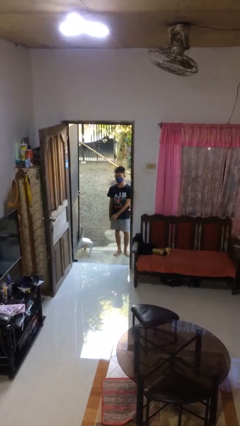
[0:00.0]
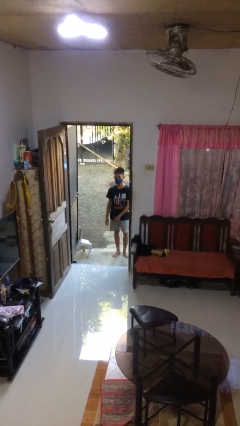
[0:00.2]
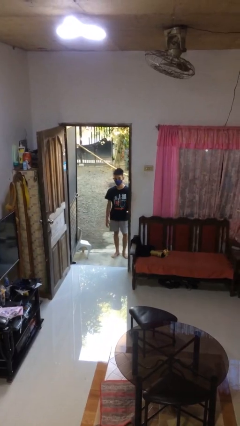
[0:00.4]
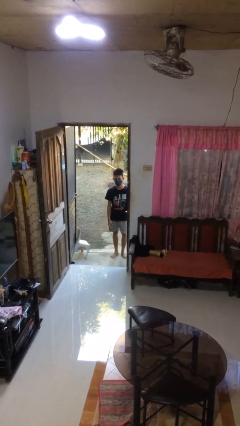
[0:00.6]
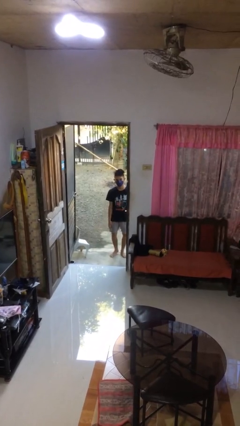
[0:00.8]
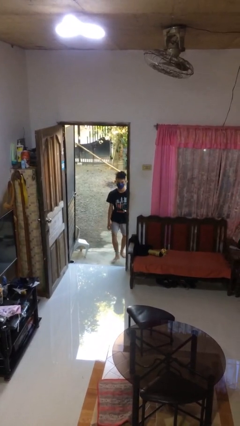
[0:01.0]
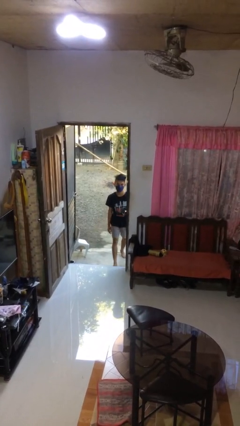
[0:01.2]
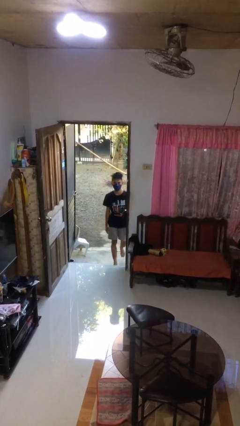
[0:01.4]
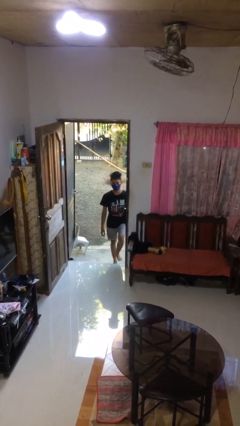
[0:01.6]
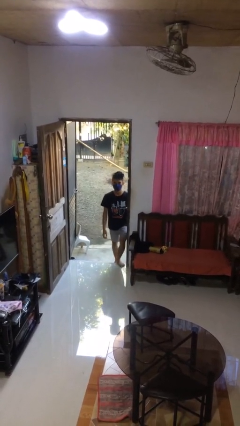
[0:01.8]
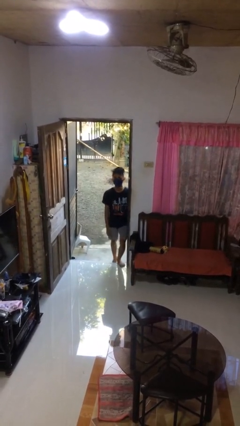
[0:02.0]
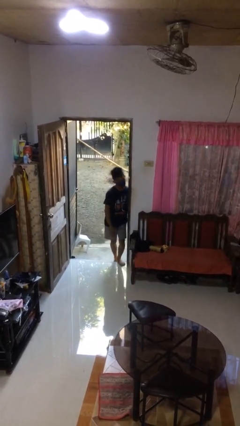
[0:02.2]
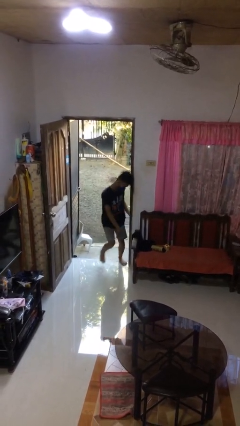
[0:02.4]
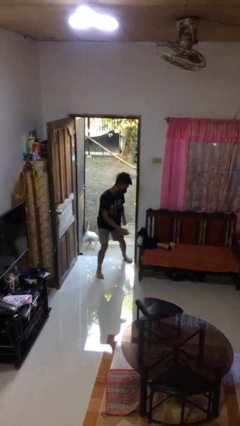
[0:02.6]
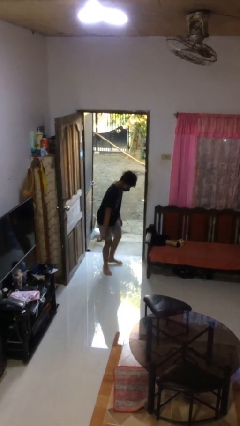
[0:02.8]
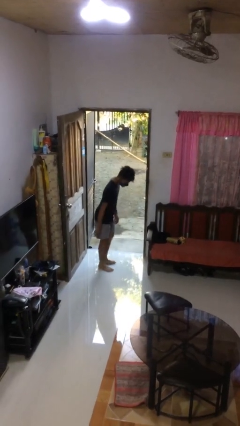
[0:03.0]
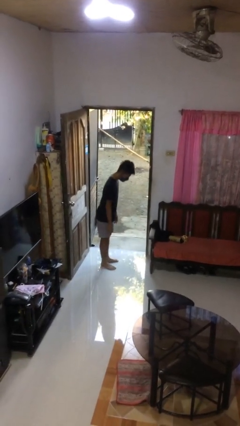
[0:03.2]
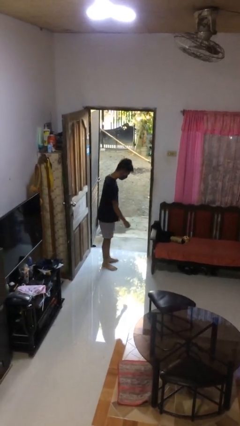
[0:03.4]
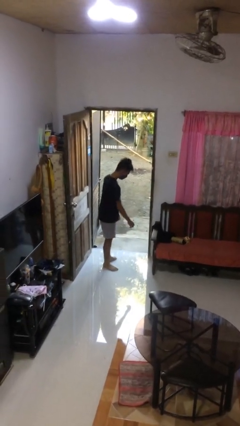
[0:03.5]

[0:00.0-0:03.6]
person bumps into wall

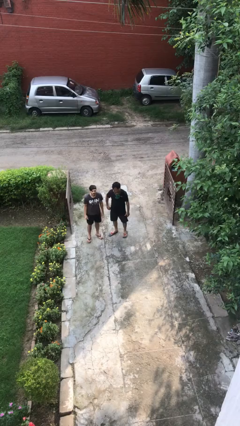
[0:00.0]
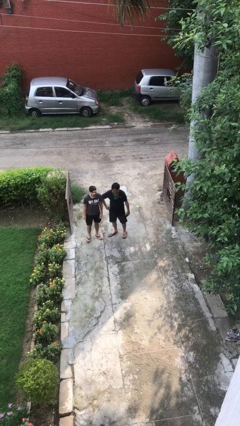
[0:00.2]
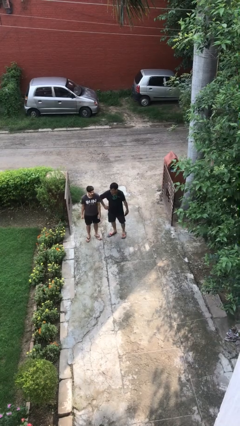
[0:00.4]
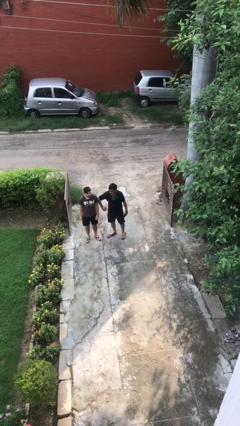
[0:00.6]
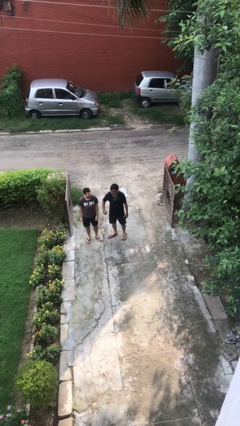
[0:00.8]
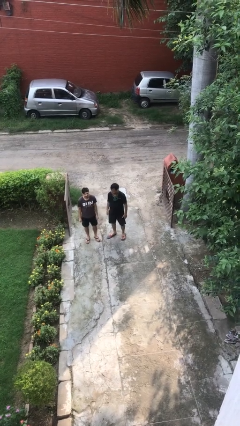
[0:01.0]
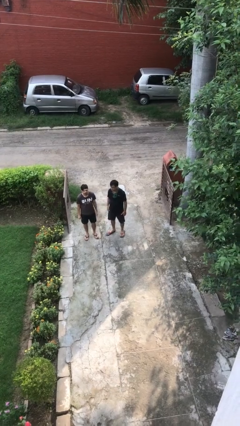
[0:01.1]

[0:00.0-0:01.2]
person nudges person with elbow

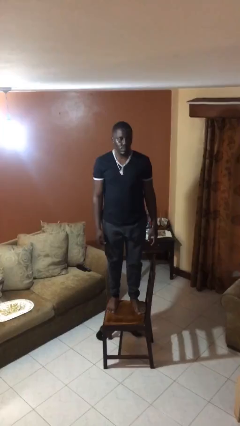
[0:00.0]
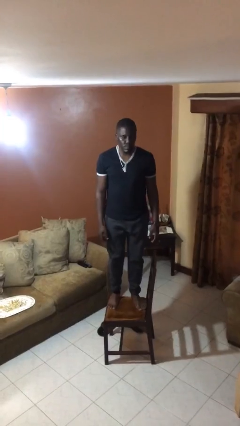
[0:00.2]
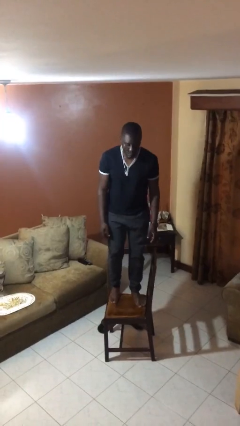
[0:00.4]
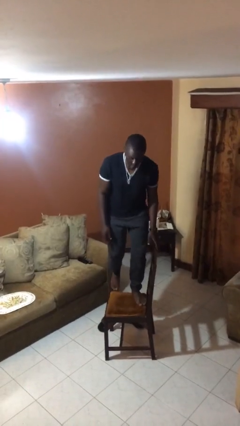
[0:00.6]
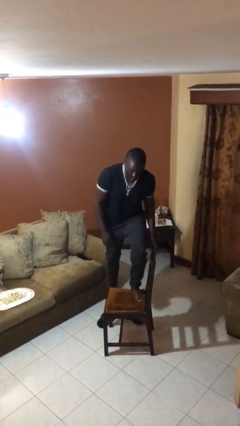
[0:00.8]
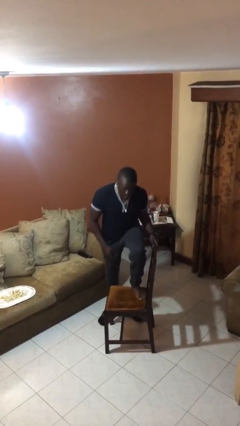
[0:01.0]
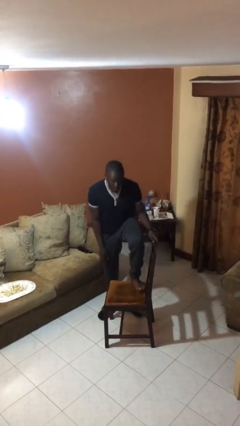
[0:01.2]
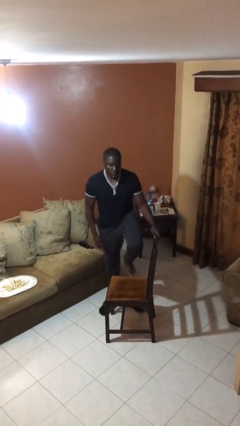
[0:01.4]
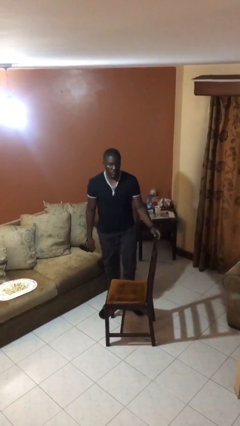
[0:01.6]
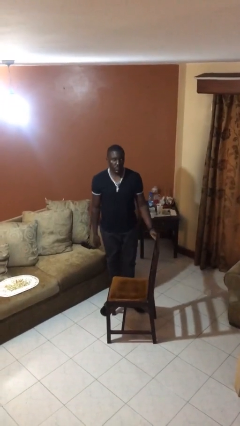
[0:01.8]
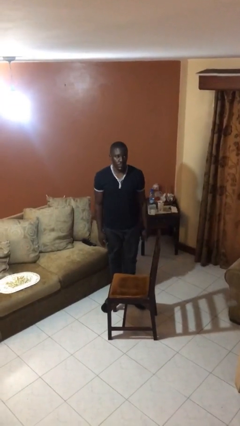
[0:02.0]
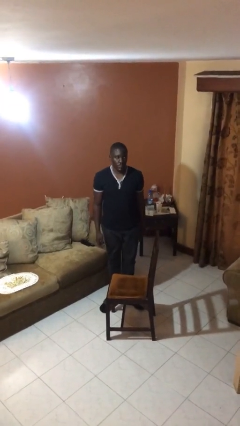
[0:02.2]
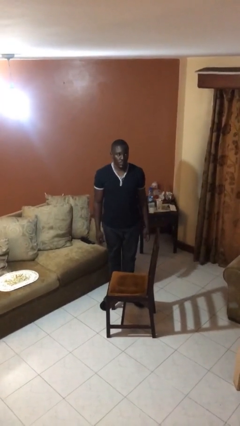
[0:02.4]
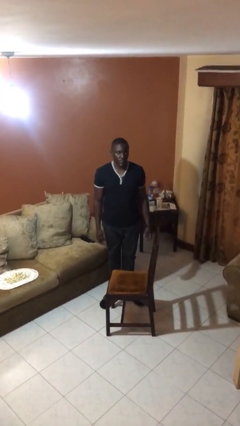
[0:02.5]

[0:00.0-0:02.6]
person climbs off chair

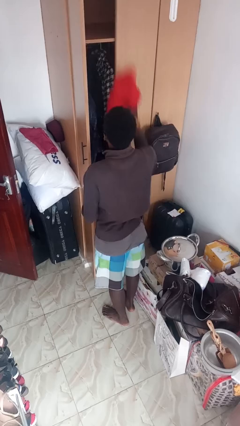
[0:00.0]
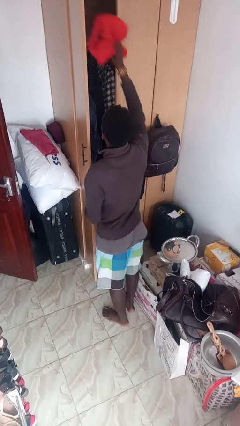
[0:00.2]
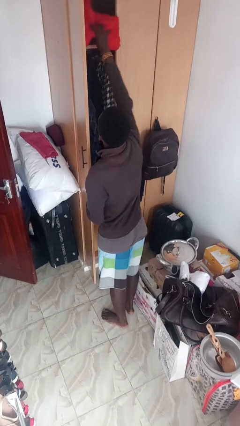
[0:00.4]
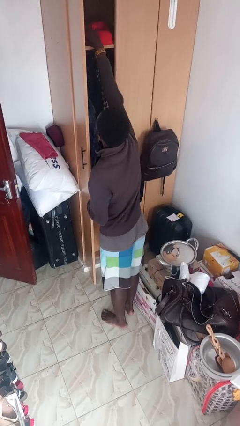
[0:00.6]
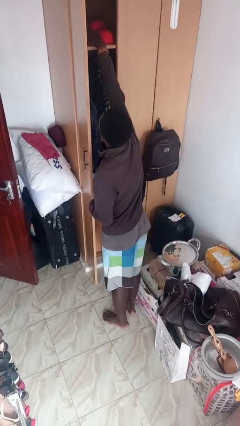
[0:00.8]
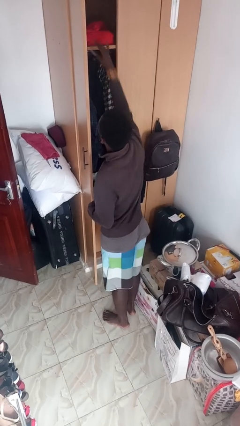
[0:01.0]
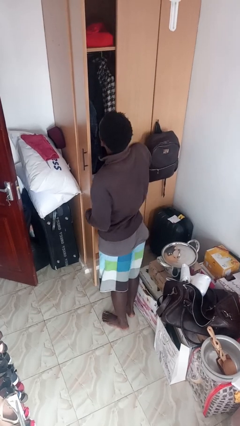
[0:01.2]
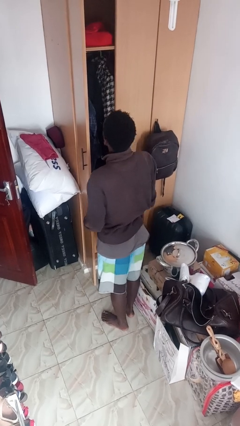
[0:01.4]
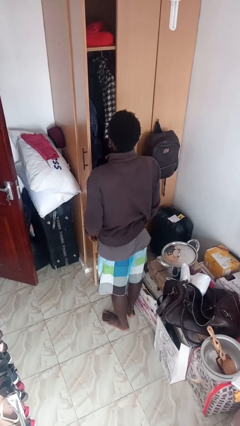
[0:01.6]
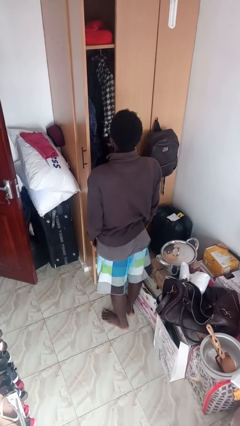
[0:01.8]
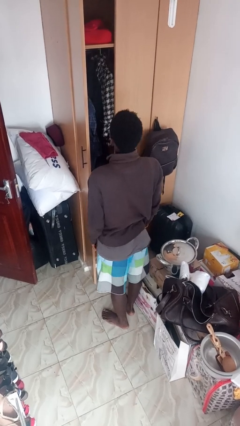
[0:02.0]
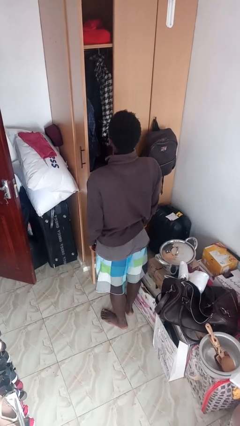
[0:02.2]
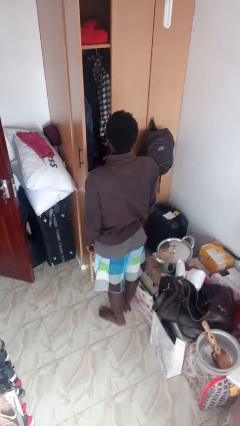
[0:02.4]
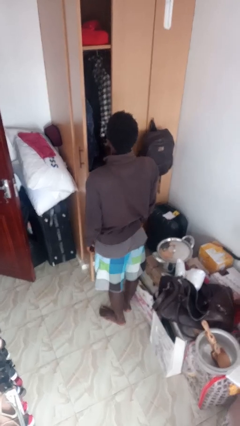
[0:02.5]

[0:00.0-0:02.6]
person puts down object on shelf

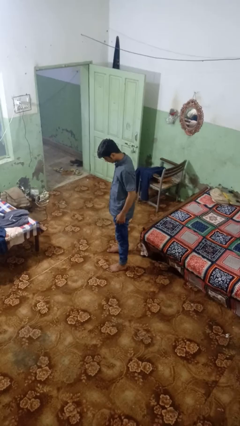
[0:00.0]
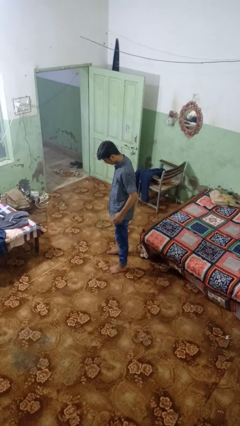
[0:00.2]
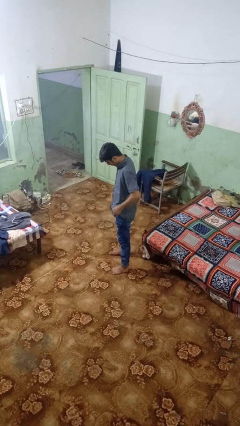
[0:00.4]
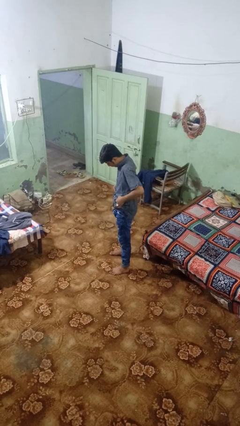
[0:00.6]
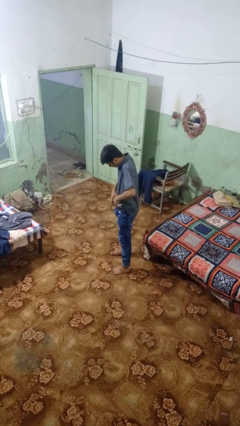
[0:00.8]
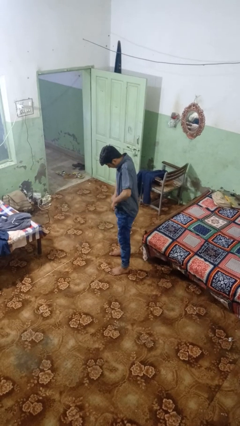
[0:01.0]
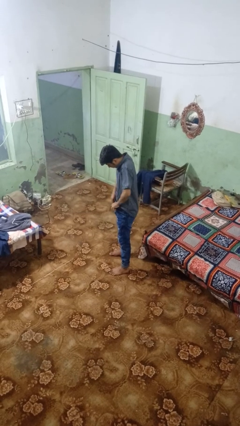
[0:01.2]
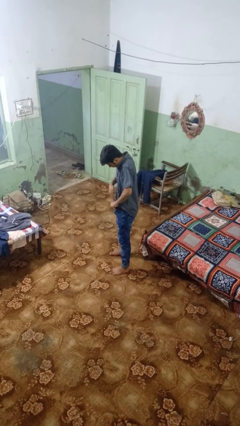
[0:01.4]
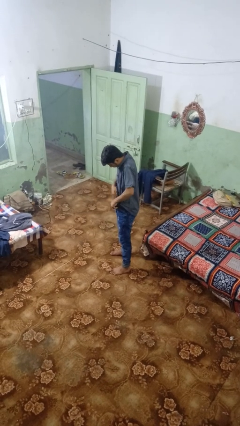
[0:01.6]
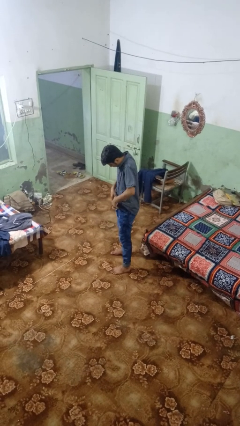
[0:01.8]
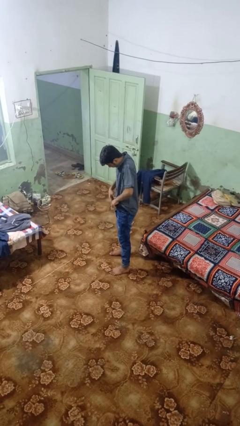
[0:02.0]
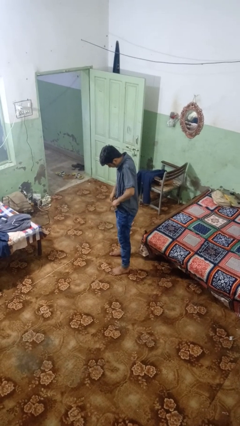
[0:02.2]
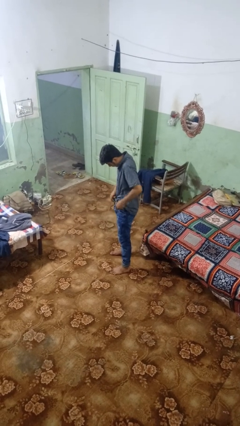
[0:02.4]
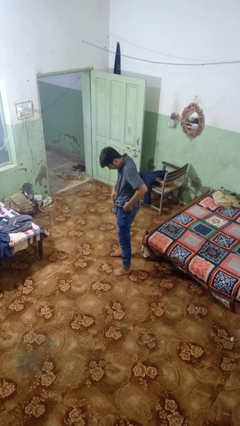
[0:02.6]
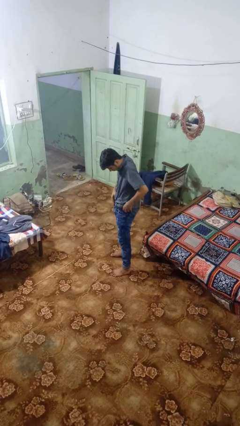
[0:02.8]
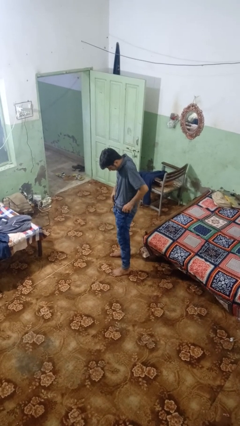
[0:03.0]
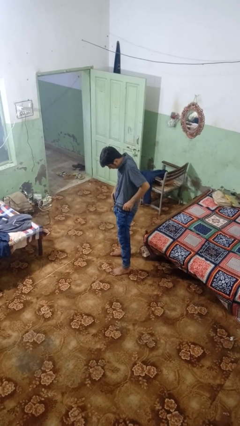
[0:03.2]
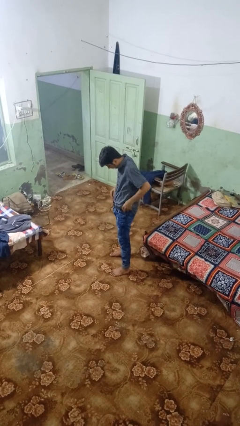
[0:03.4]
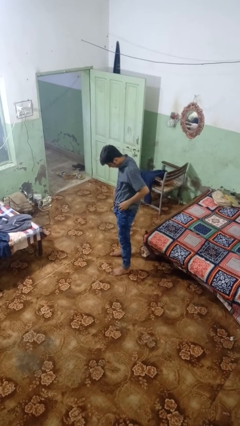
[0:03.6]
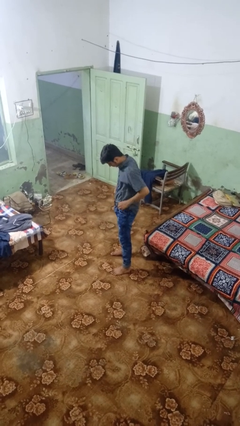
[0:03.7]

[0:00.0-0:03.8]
person tucks in shirt

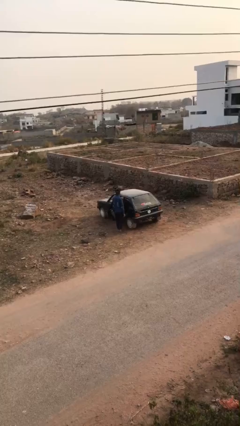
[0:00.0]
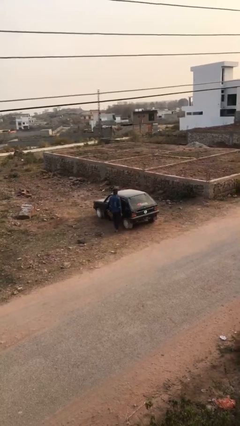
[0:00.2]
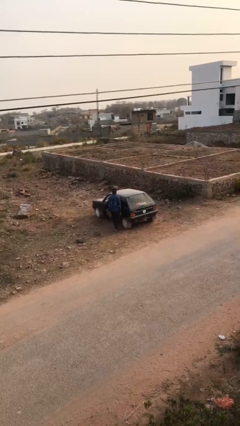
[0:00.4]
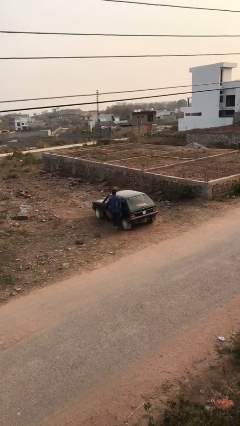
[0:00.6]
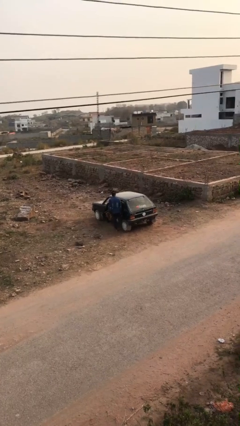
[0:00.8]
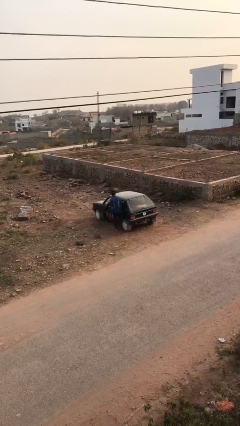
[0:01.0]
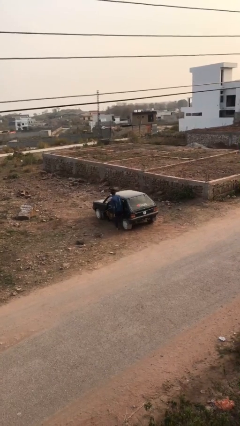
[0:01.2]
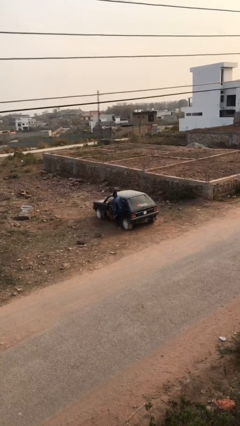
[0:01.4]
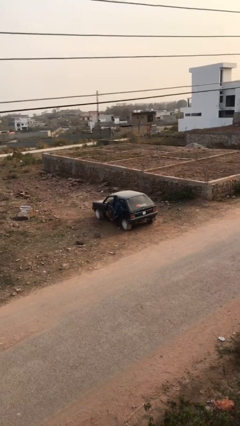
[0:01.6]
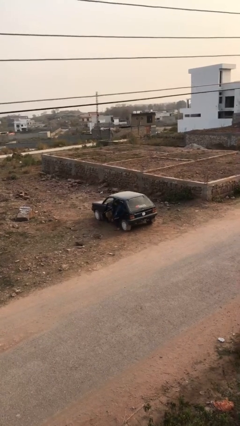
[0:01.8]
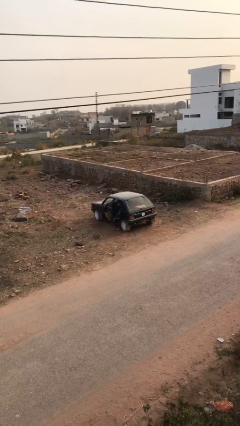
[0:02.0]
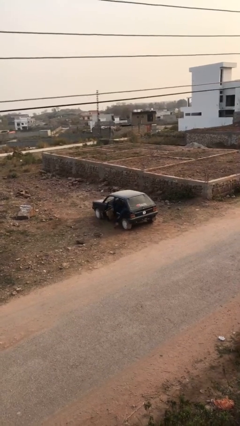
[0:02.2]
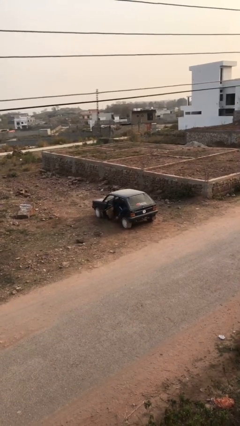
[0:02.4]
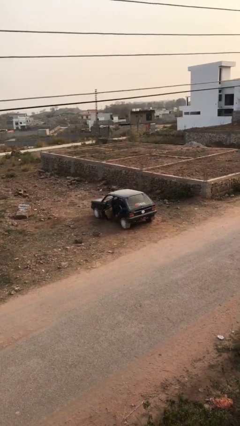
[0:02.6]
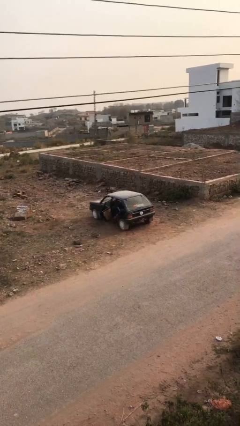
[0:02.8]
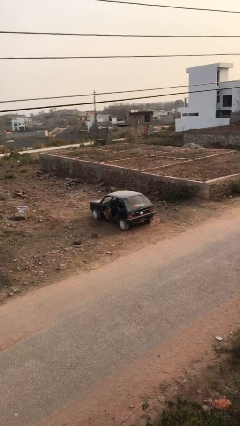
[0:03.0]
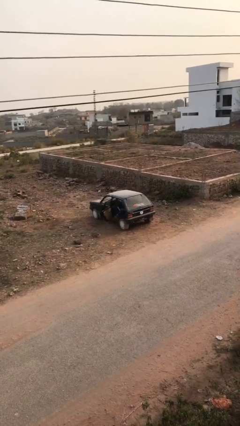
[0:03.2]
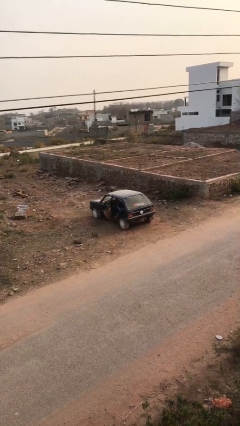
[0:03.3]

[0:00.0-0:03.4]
person enters car

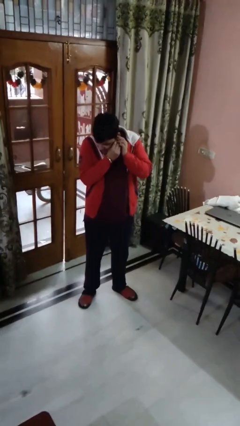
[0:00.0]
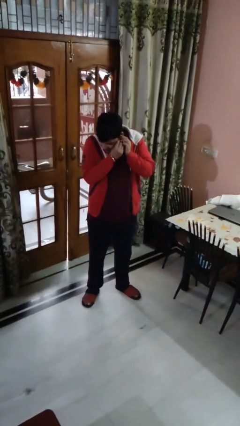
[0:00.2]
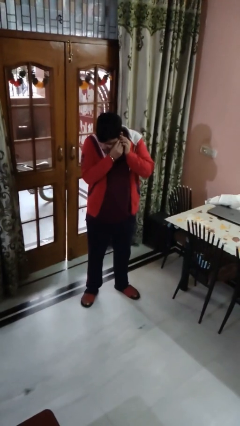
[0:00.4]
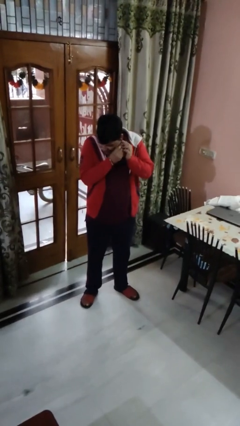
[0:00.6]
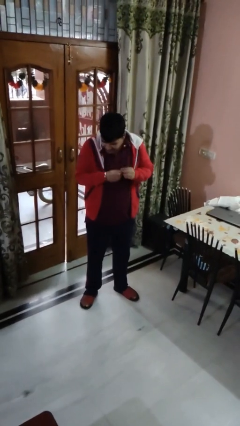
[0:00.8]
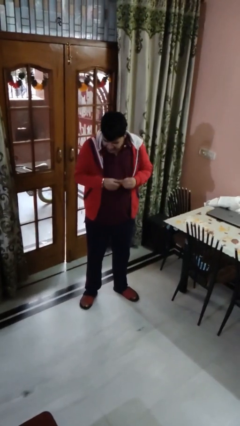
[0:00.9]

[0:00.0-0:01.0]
person takes off earrings
